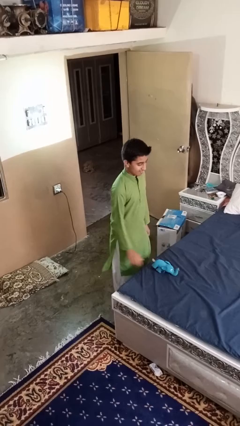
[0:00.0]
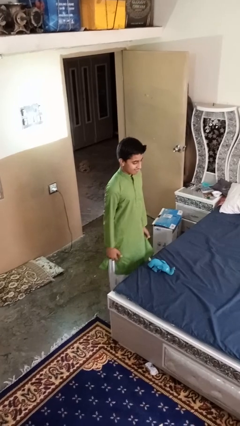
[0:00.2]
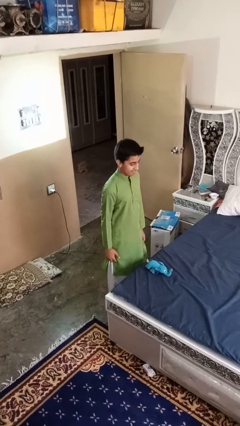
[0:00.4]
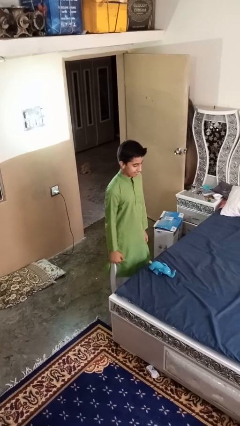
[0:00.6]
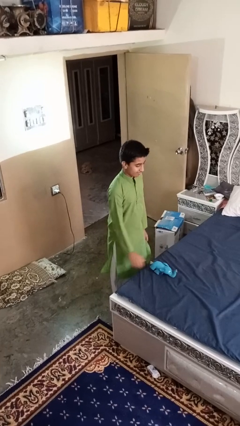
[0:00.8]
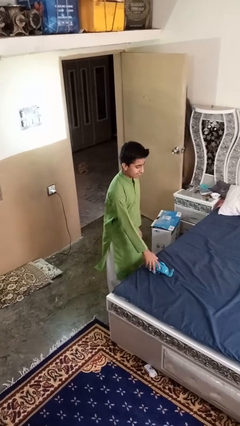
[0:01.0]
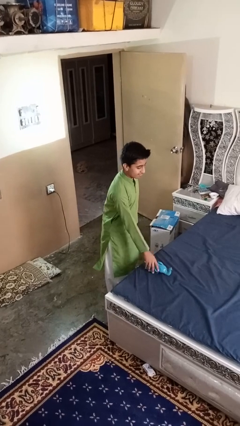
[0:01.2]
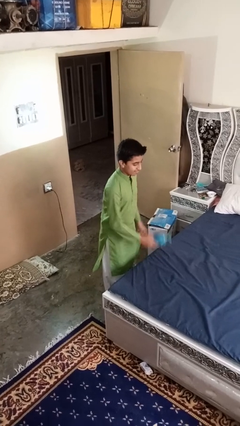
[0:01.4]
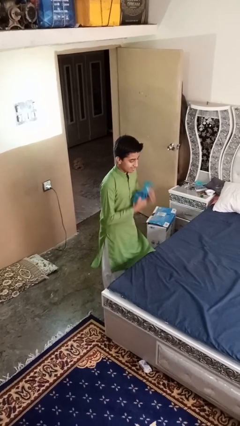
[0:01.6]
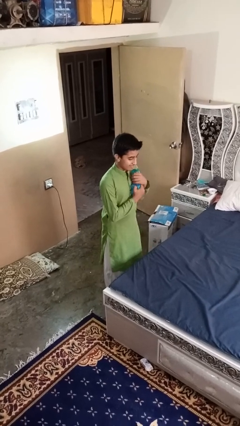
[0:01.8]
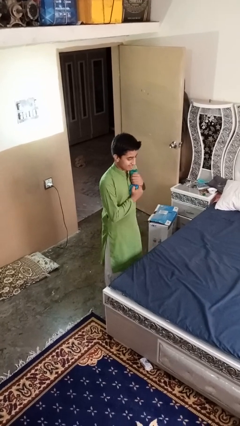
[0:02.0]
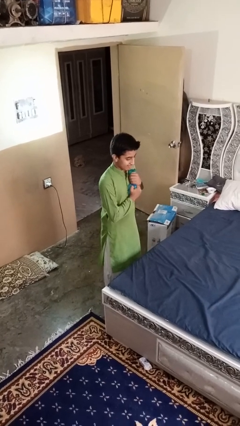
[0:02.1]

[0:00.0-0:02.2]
person hugs stuffed animal

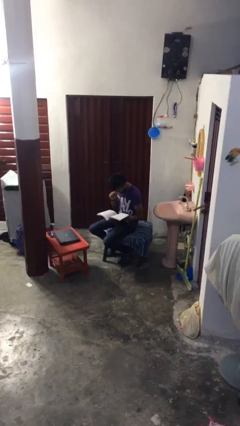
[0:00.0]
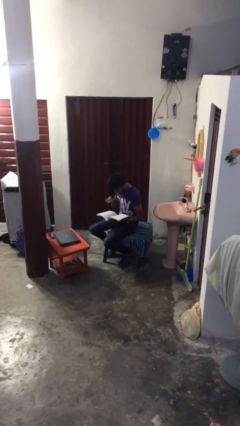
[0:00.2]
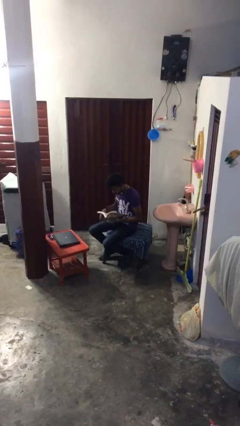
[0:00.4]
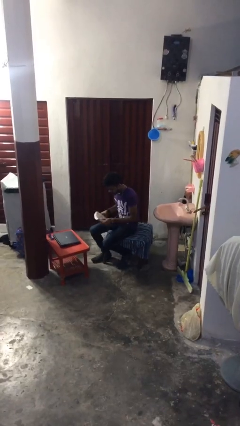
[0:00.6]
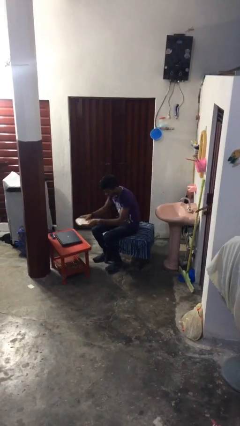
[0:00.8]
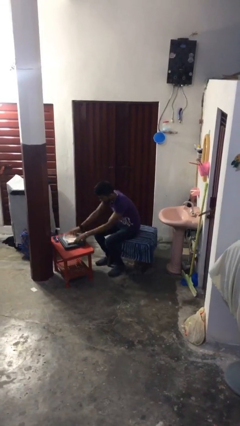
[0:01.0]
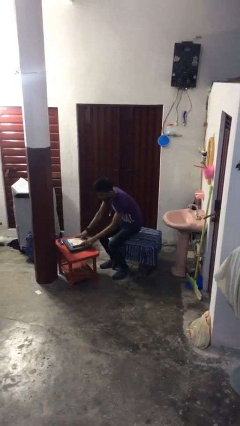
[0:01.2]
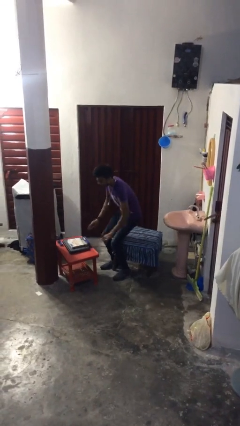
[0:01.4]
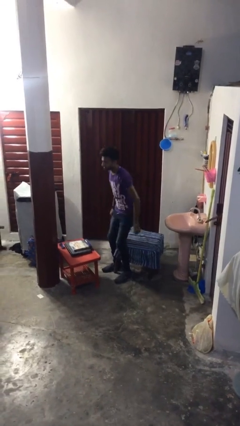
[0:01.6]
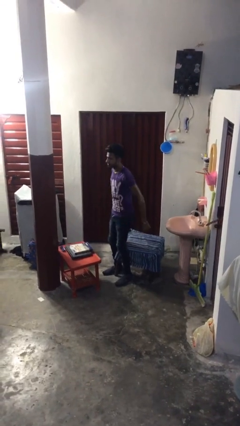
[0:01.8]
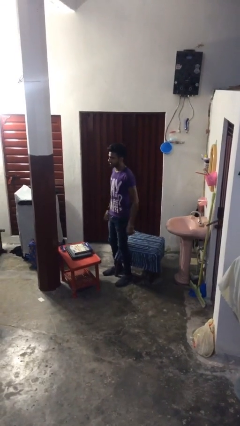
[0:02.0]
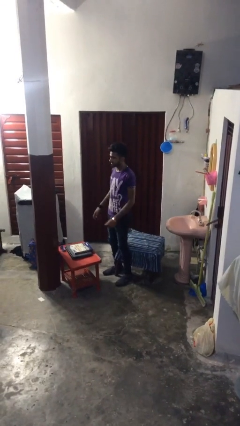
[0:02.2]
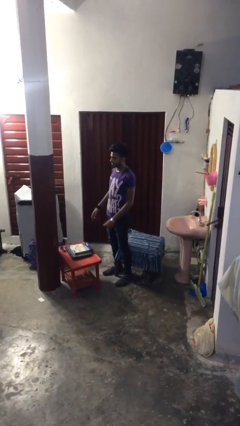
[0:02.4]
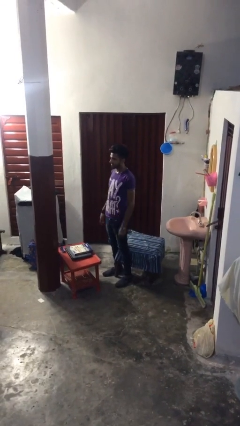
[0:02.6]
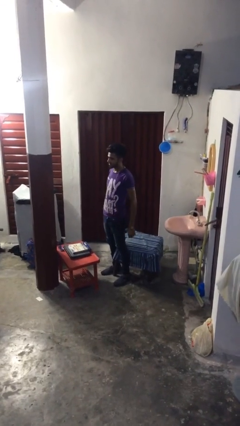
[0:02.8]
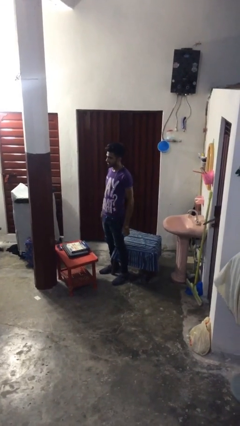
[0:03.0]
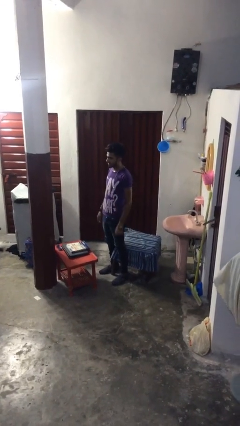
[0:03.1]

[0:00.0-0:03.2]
person stands up

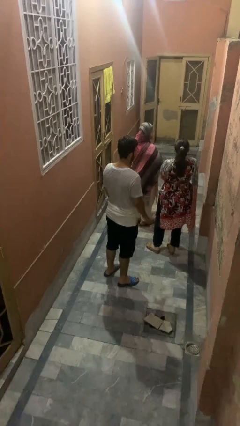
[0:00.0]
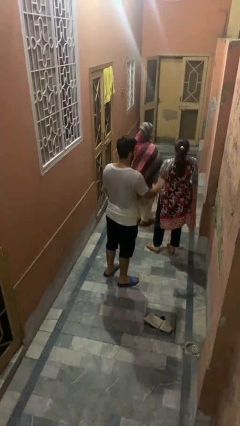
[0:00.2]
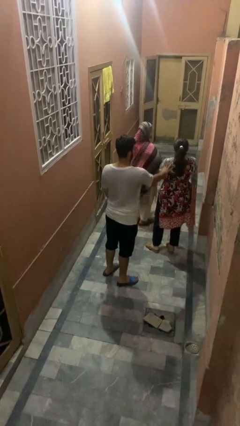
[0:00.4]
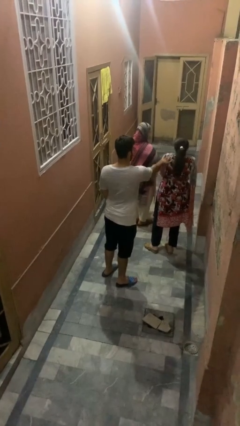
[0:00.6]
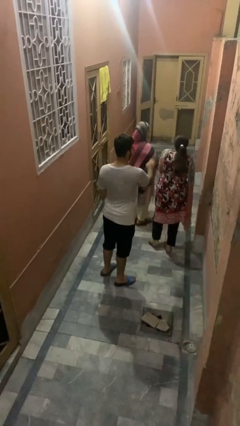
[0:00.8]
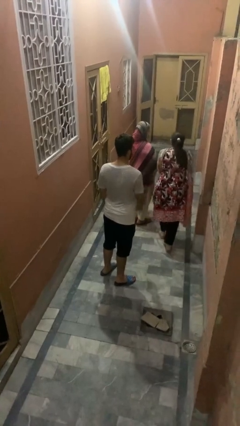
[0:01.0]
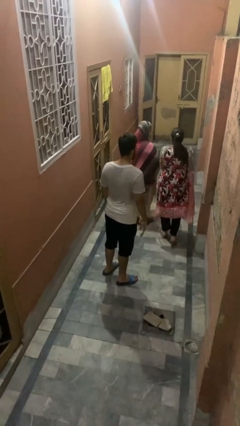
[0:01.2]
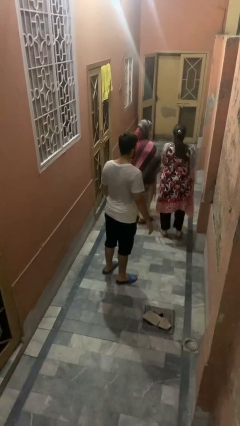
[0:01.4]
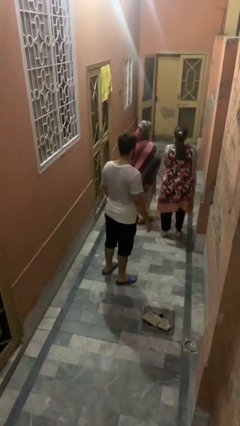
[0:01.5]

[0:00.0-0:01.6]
person shoves person

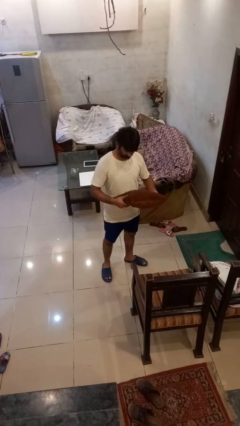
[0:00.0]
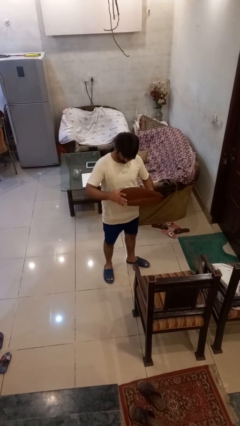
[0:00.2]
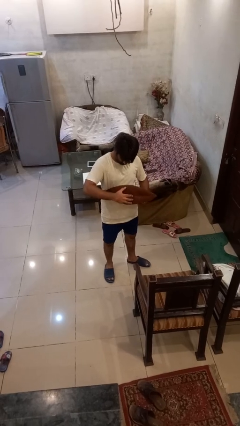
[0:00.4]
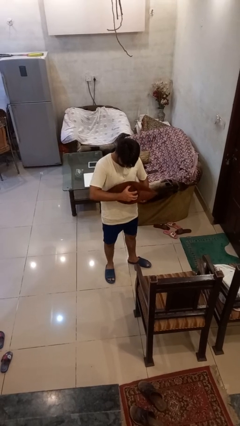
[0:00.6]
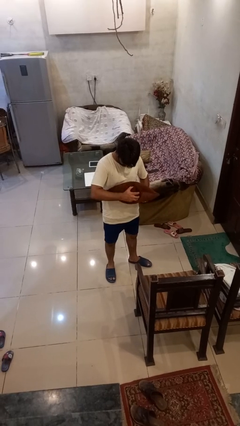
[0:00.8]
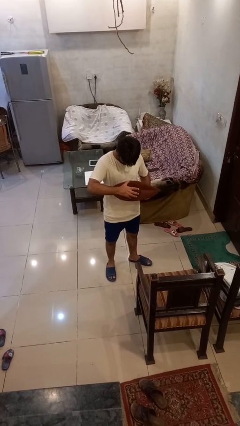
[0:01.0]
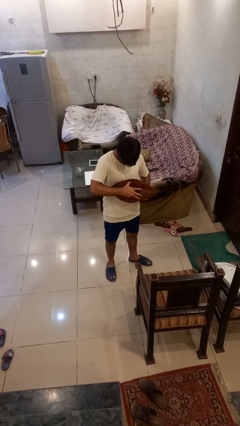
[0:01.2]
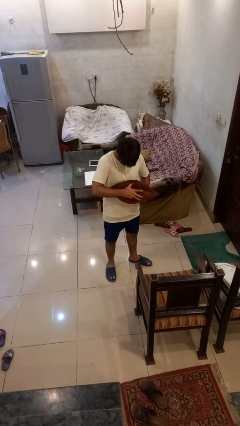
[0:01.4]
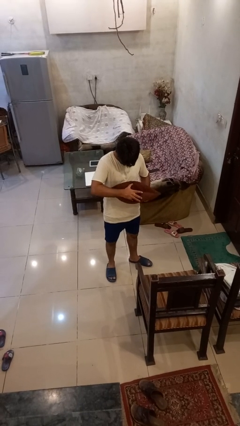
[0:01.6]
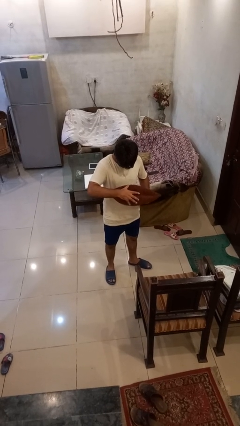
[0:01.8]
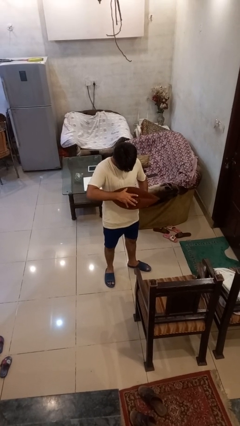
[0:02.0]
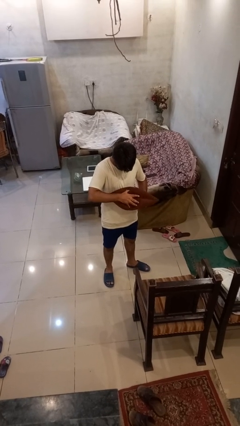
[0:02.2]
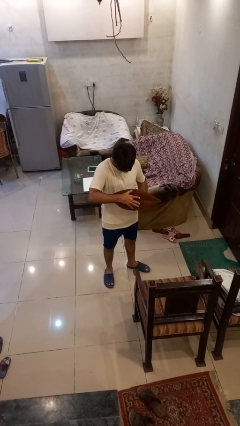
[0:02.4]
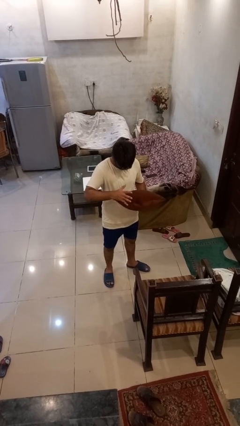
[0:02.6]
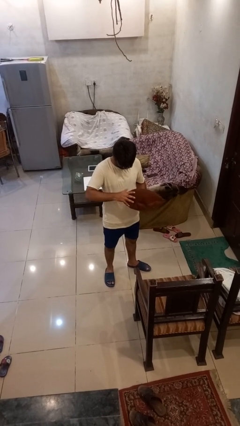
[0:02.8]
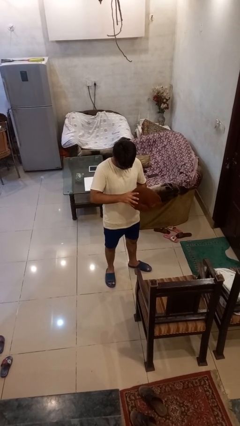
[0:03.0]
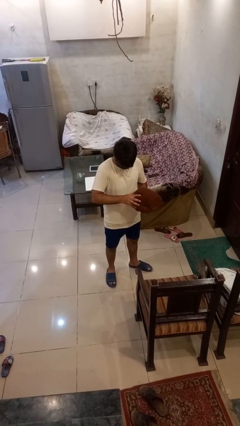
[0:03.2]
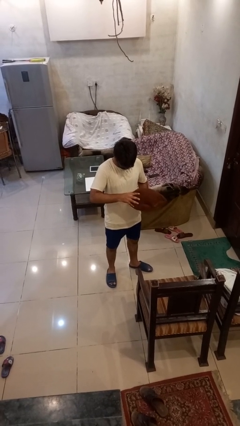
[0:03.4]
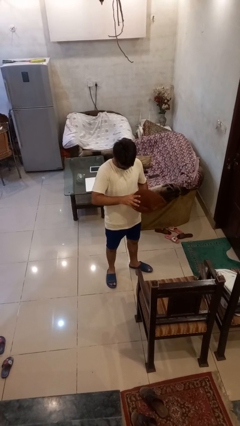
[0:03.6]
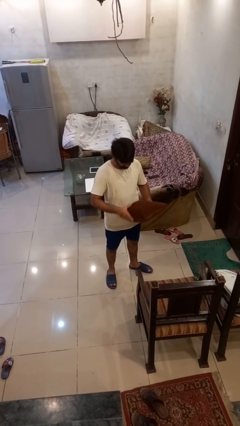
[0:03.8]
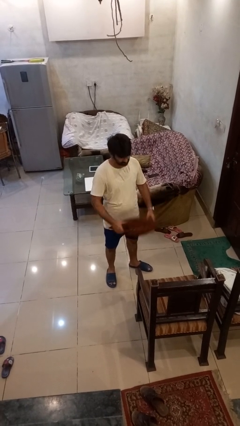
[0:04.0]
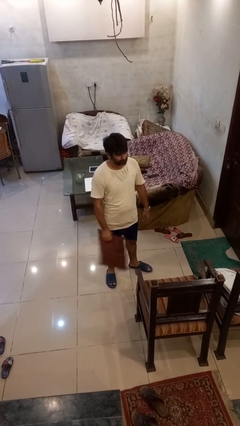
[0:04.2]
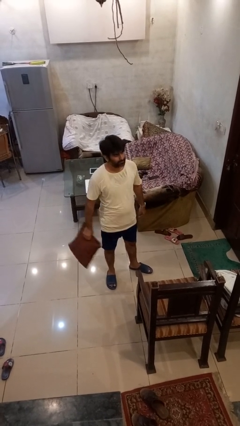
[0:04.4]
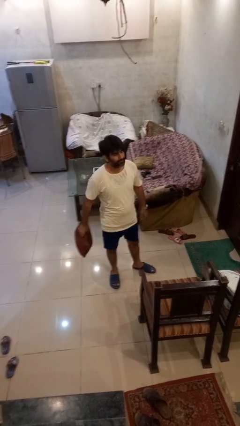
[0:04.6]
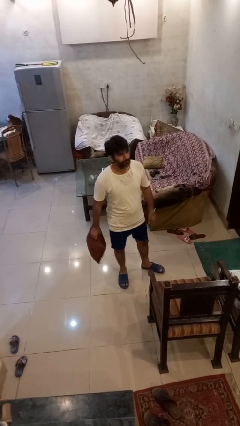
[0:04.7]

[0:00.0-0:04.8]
person squeezes object

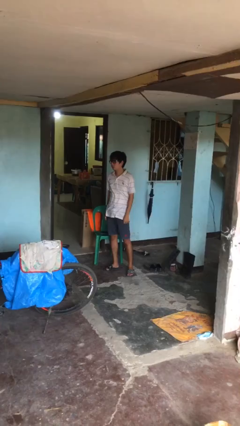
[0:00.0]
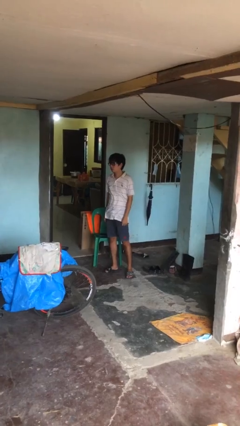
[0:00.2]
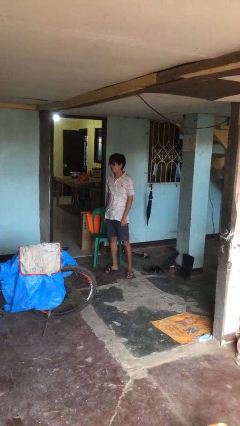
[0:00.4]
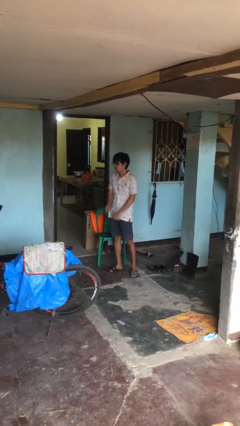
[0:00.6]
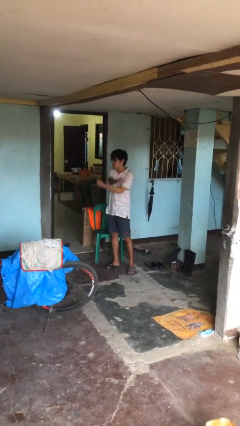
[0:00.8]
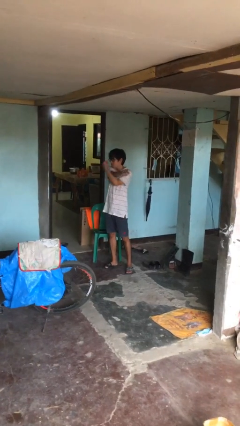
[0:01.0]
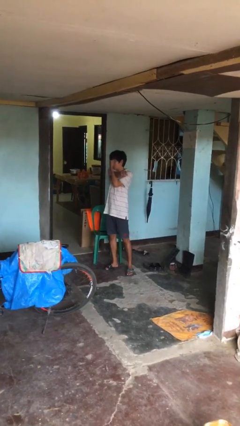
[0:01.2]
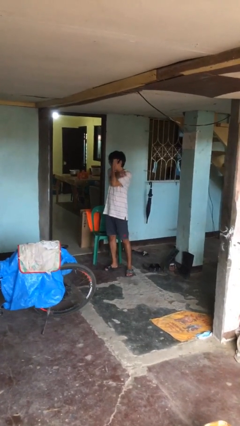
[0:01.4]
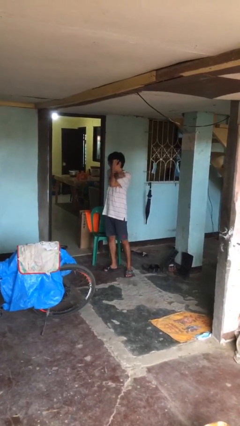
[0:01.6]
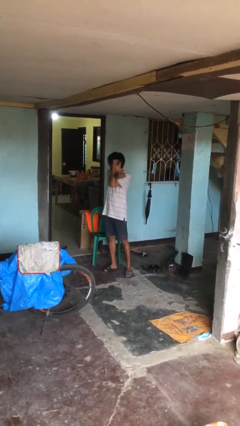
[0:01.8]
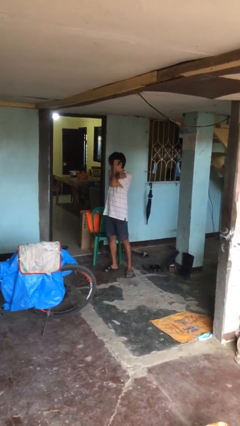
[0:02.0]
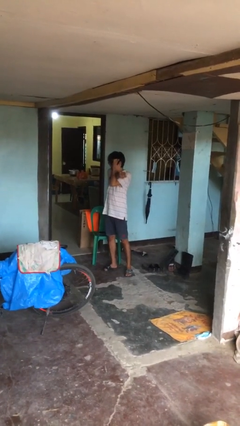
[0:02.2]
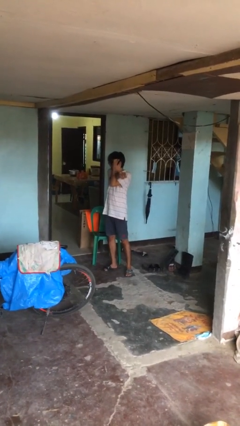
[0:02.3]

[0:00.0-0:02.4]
person crosses arms

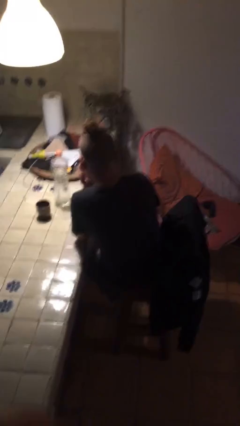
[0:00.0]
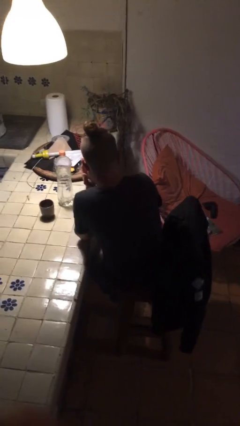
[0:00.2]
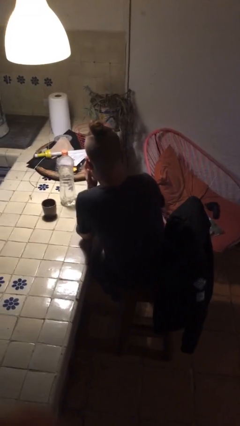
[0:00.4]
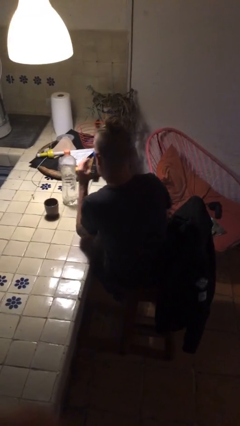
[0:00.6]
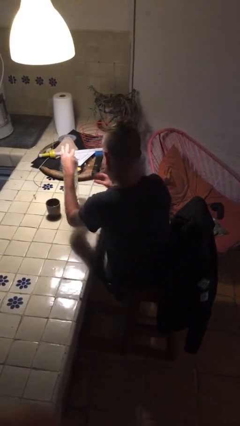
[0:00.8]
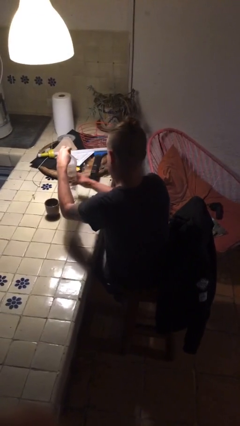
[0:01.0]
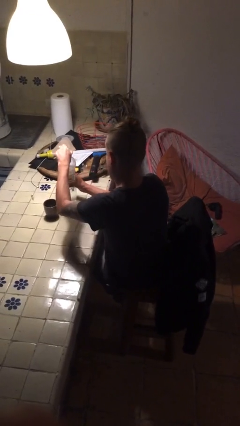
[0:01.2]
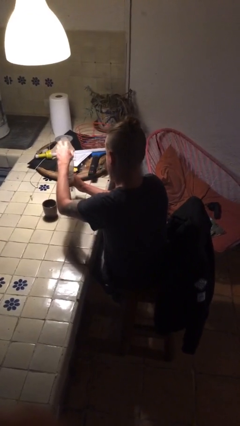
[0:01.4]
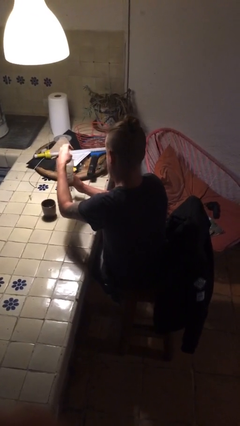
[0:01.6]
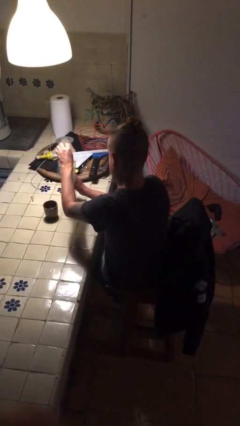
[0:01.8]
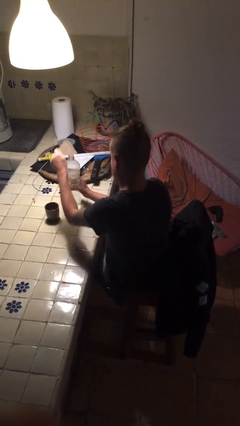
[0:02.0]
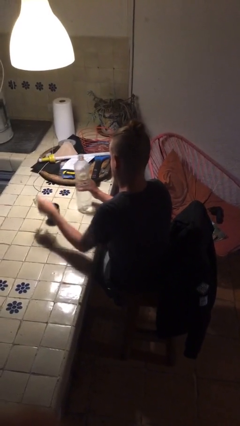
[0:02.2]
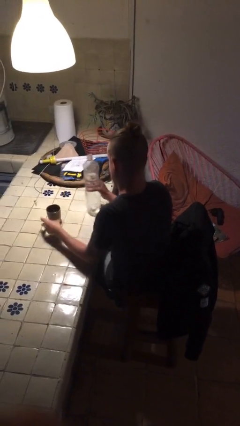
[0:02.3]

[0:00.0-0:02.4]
person unscrews lid from bottle

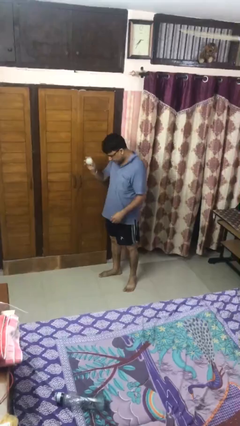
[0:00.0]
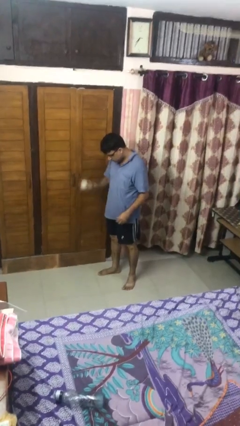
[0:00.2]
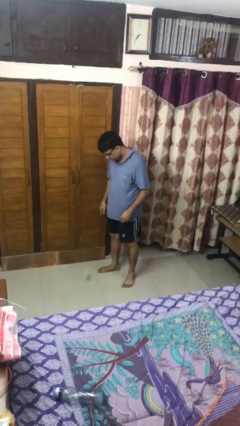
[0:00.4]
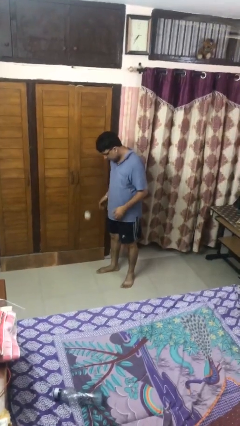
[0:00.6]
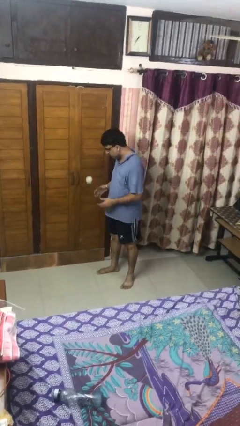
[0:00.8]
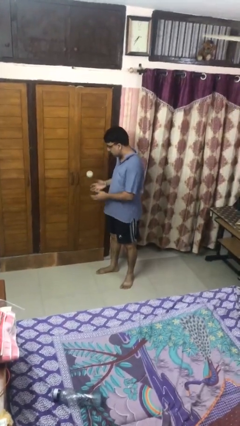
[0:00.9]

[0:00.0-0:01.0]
person bounces ball on floor
